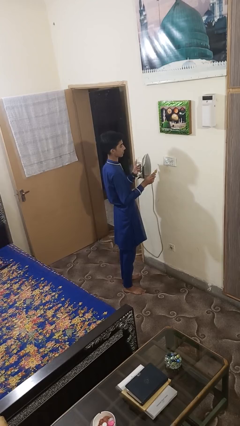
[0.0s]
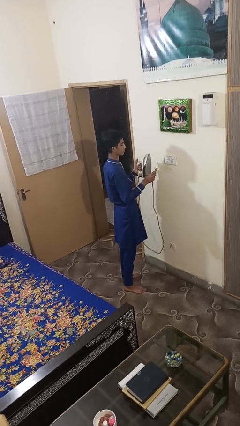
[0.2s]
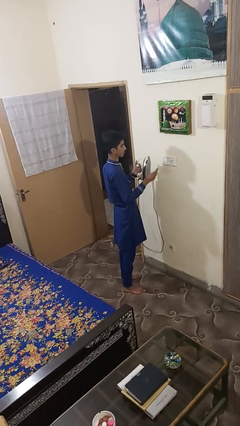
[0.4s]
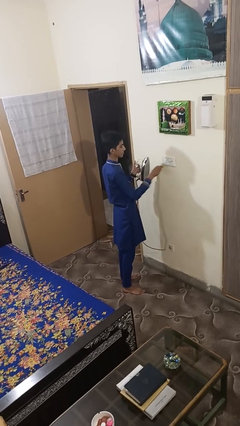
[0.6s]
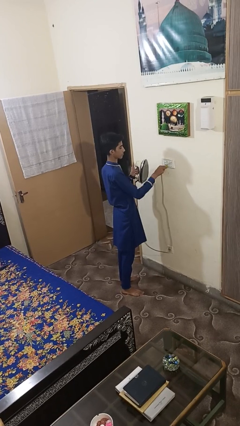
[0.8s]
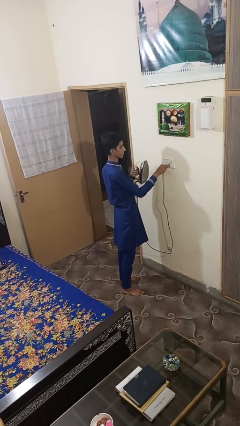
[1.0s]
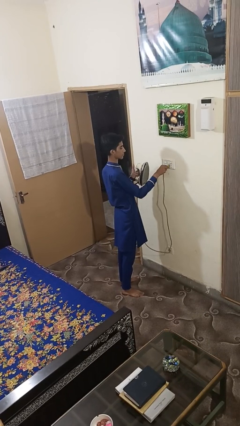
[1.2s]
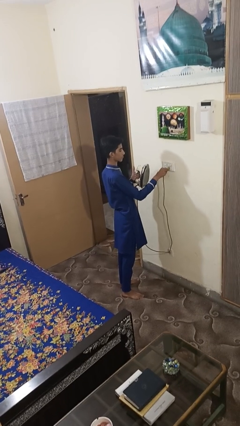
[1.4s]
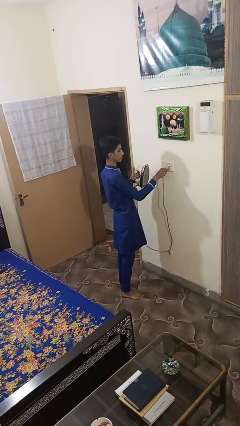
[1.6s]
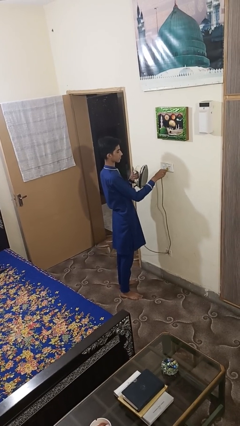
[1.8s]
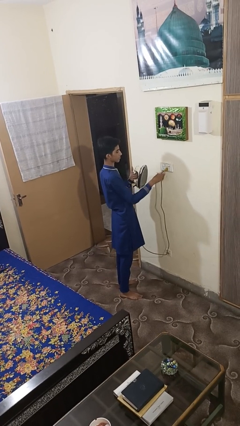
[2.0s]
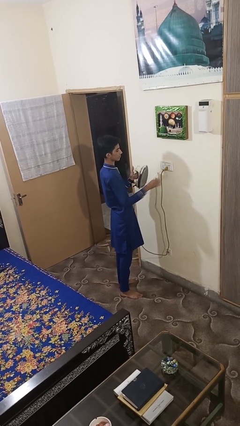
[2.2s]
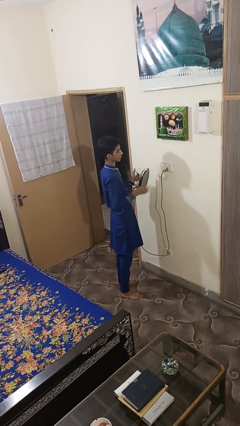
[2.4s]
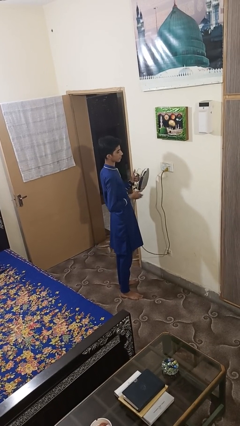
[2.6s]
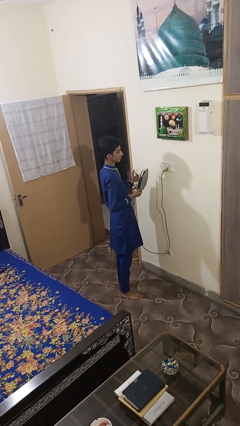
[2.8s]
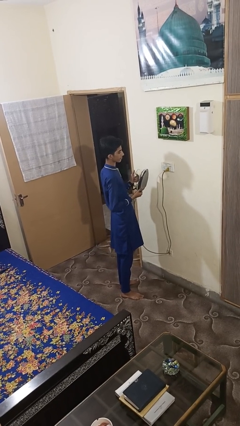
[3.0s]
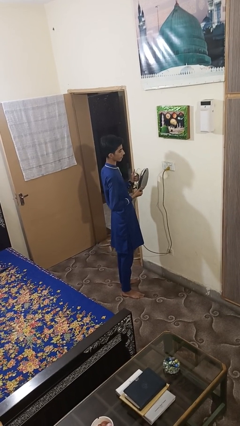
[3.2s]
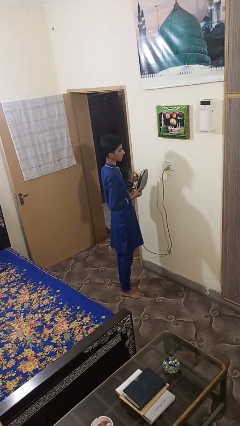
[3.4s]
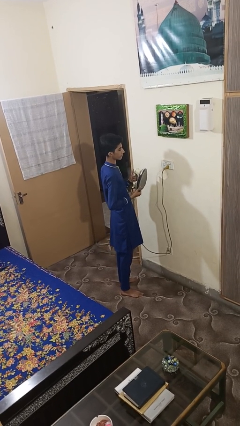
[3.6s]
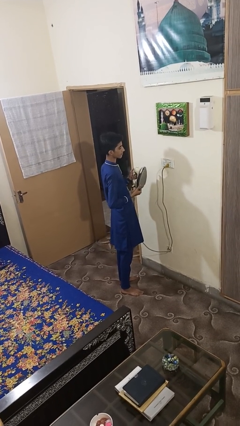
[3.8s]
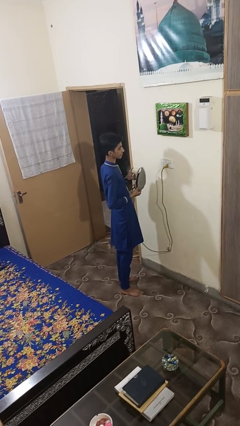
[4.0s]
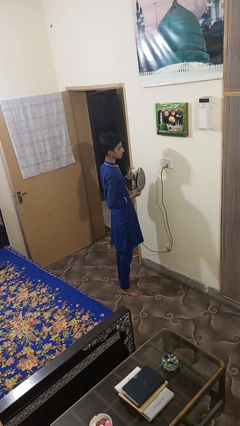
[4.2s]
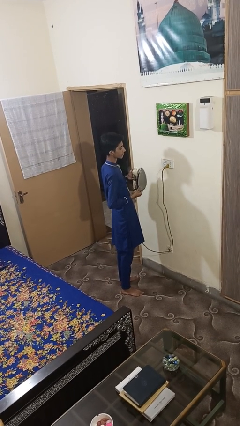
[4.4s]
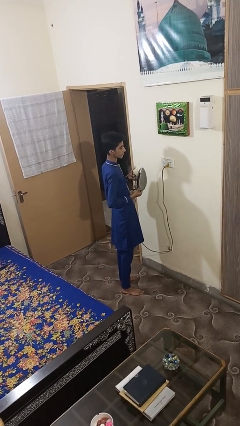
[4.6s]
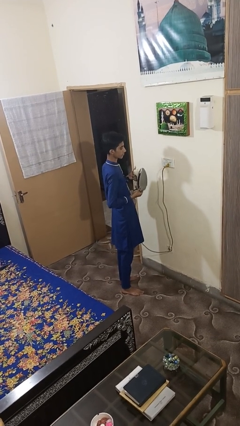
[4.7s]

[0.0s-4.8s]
person plugs into electrical socket

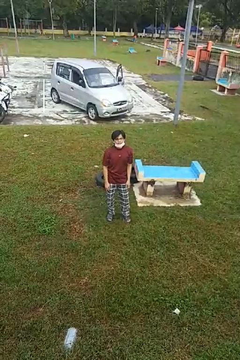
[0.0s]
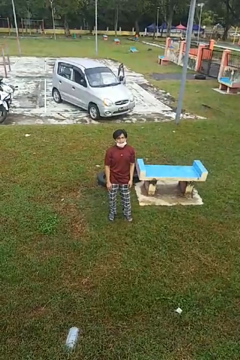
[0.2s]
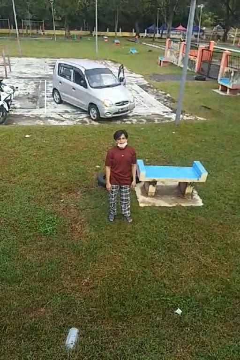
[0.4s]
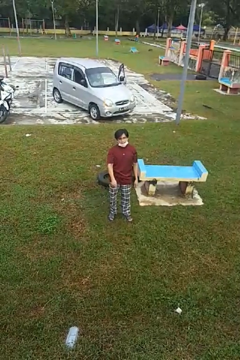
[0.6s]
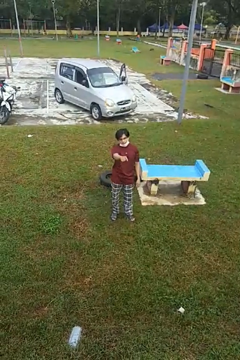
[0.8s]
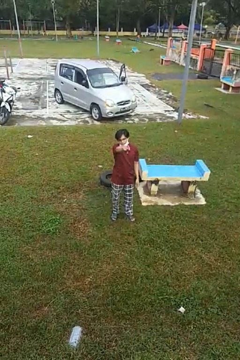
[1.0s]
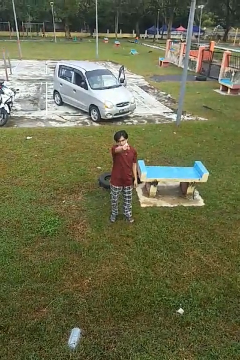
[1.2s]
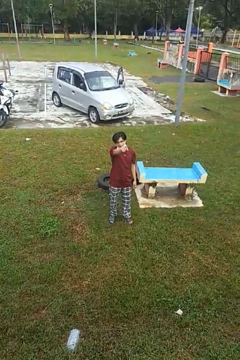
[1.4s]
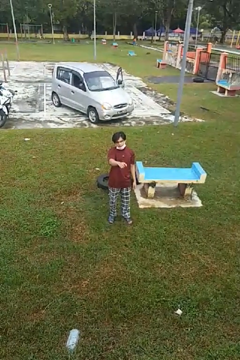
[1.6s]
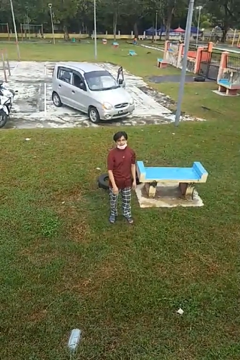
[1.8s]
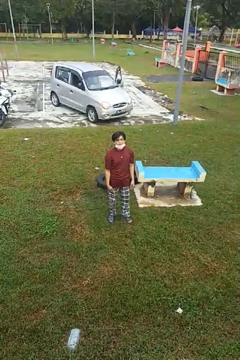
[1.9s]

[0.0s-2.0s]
person points at person

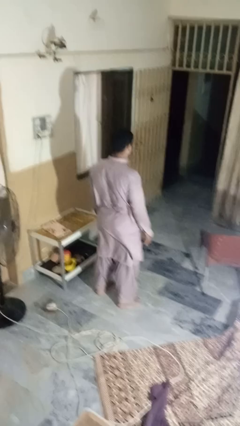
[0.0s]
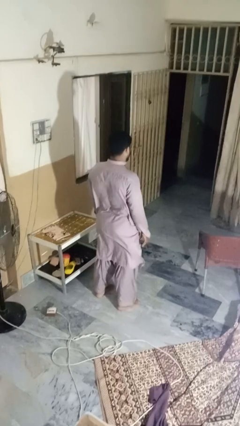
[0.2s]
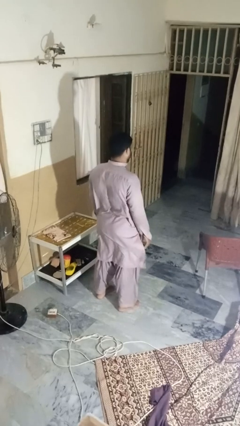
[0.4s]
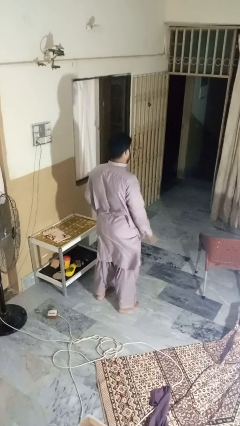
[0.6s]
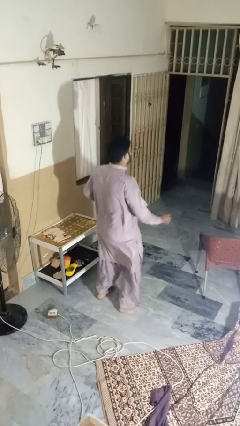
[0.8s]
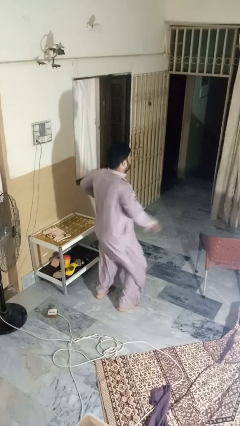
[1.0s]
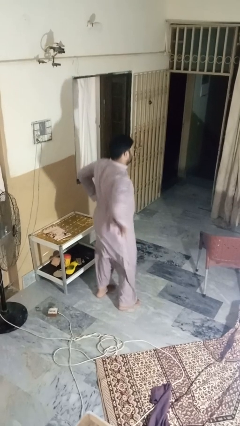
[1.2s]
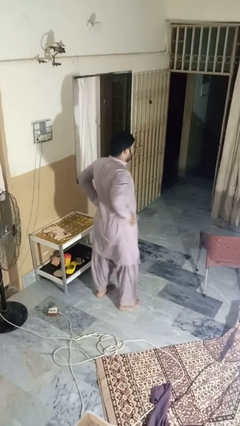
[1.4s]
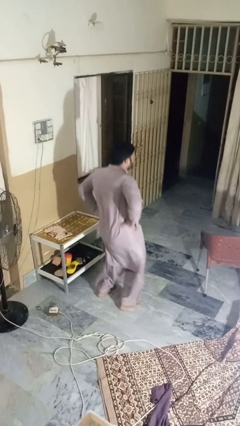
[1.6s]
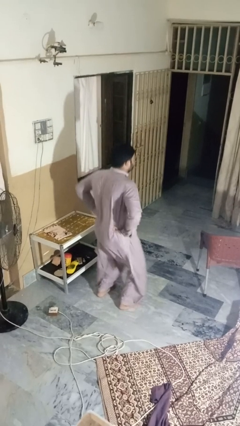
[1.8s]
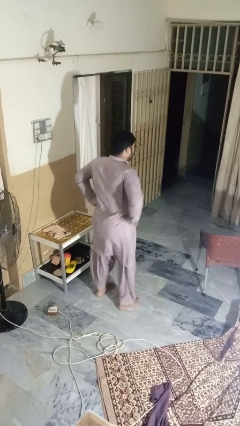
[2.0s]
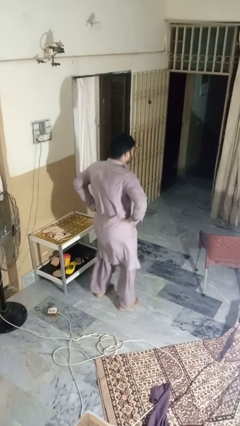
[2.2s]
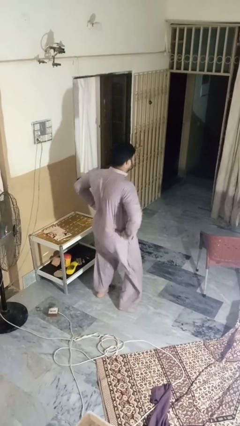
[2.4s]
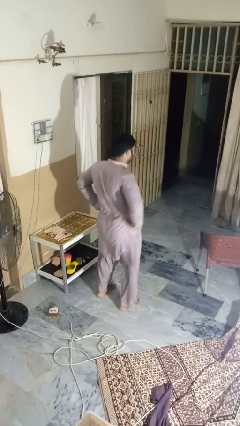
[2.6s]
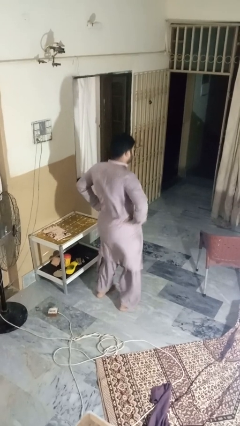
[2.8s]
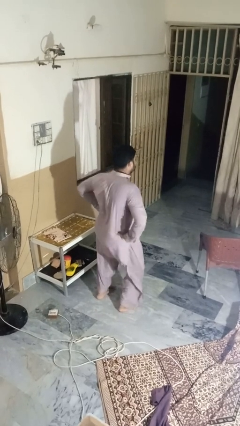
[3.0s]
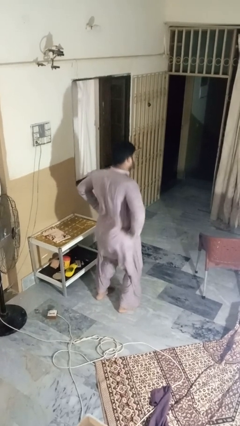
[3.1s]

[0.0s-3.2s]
person dances in place

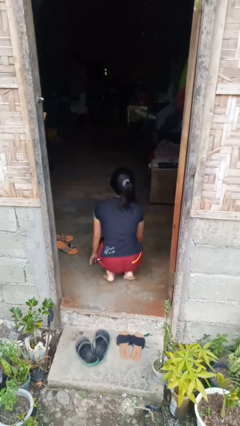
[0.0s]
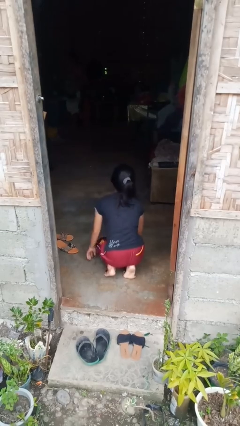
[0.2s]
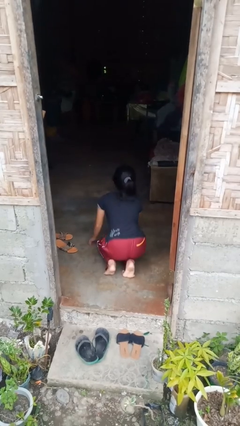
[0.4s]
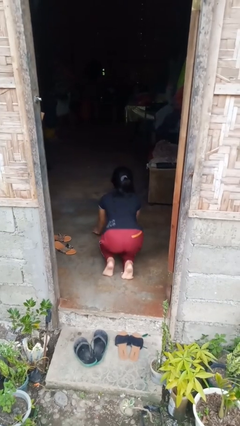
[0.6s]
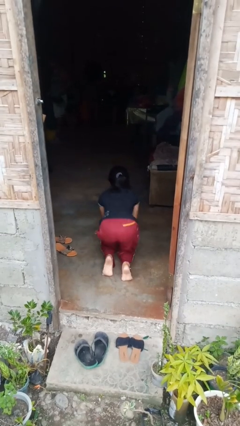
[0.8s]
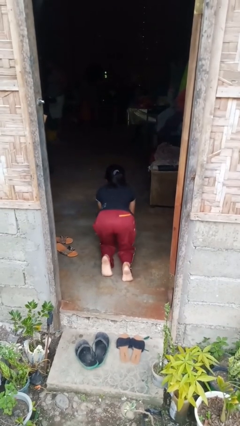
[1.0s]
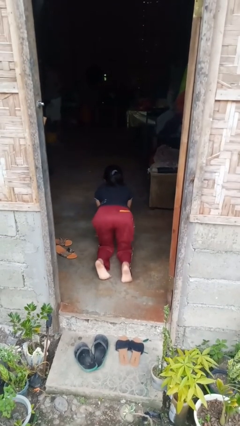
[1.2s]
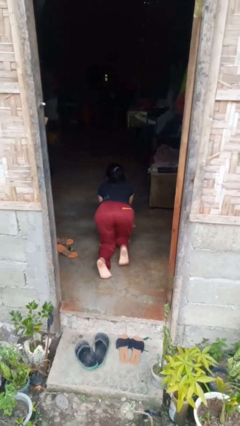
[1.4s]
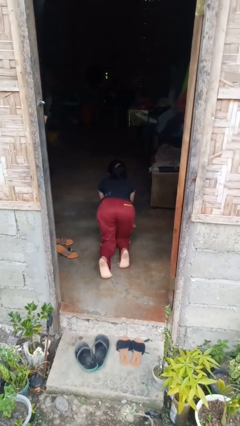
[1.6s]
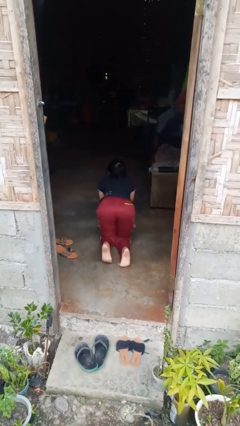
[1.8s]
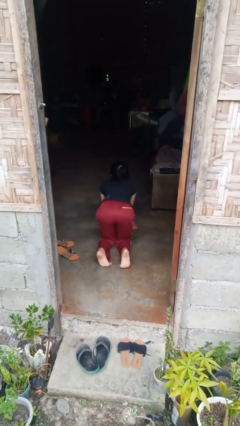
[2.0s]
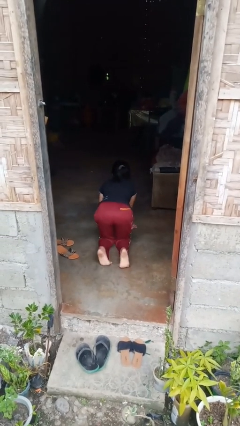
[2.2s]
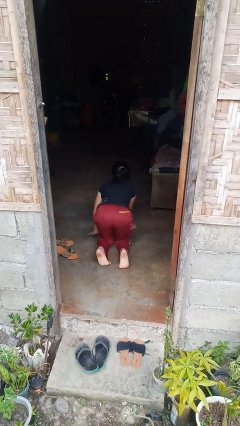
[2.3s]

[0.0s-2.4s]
person crawls

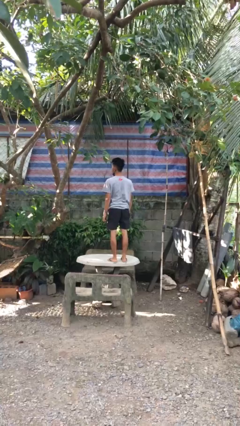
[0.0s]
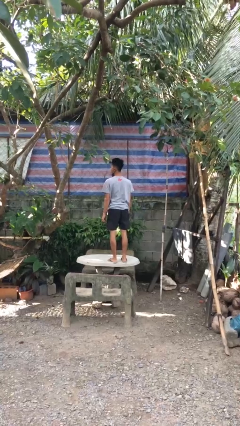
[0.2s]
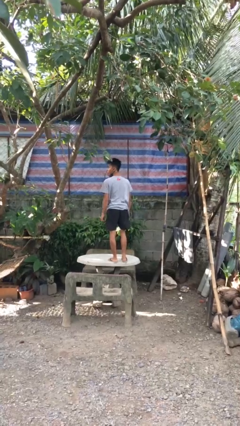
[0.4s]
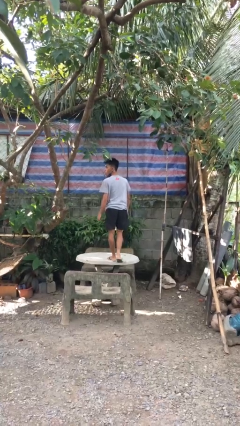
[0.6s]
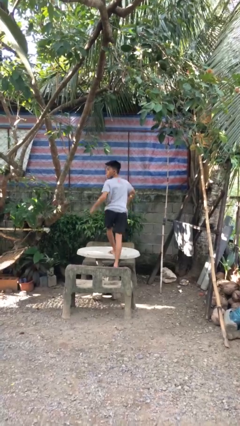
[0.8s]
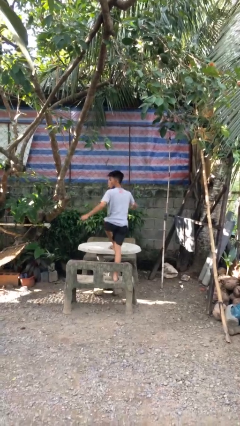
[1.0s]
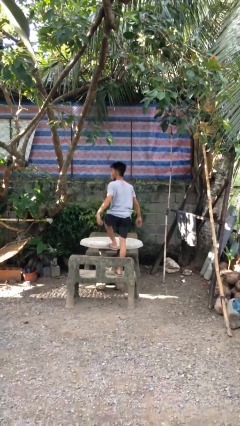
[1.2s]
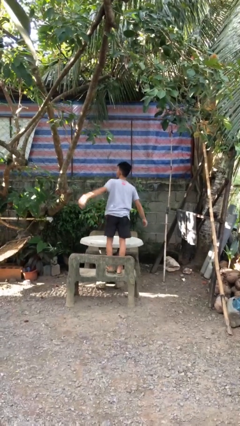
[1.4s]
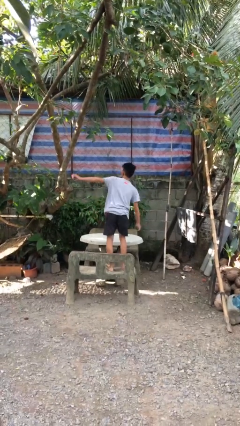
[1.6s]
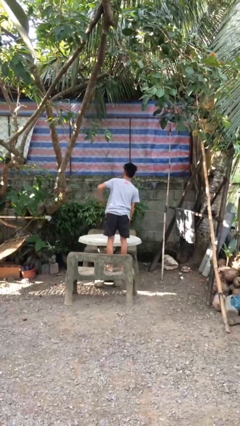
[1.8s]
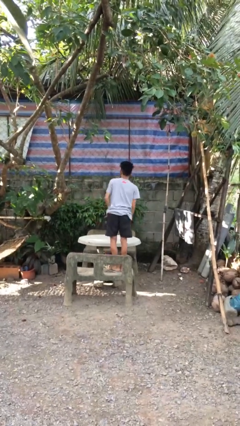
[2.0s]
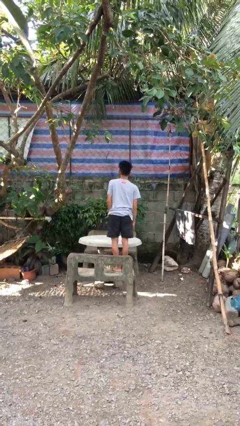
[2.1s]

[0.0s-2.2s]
person climbs off table

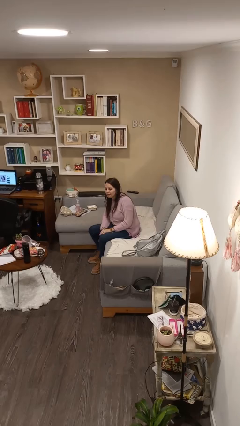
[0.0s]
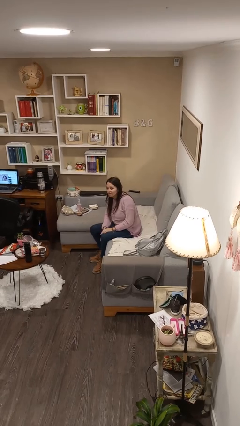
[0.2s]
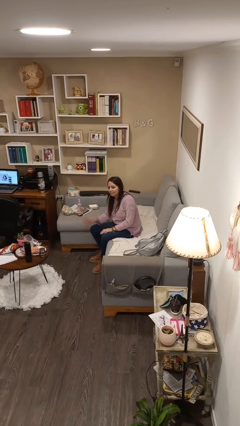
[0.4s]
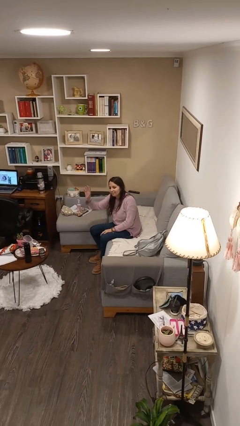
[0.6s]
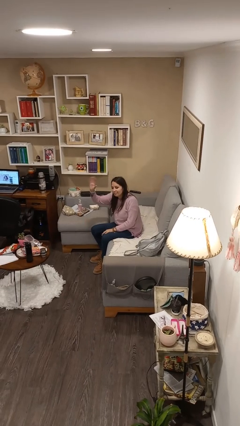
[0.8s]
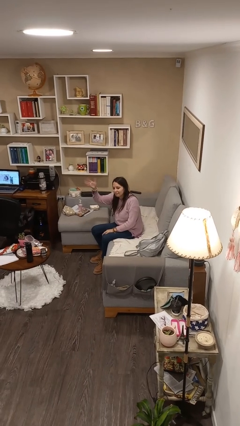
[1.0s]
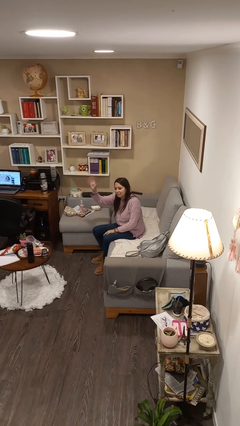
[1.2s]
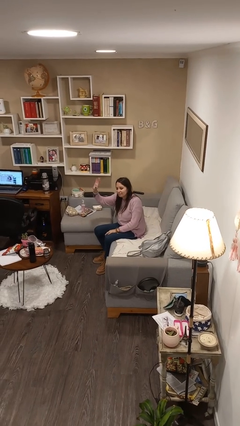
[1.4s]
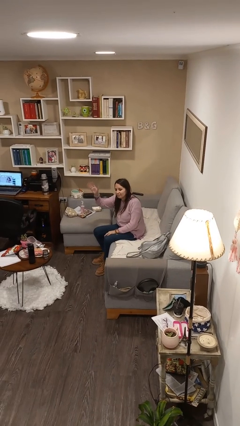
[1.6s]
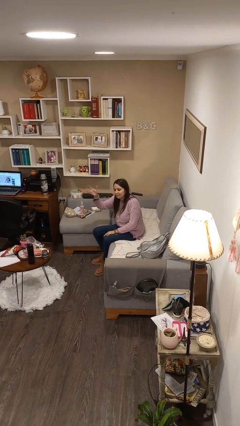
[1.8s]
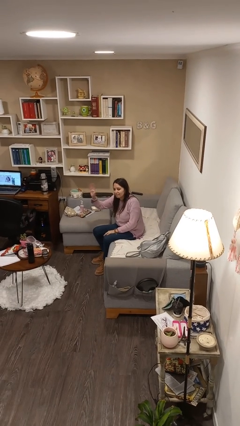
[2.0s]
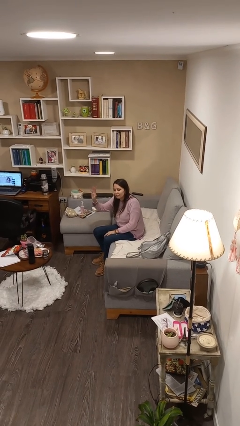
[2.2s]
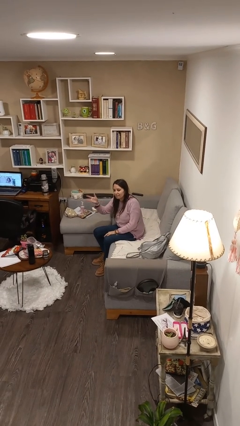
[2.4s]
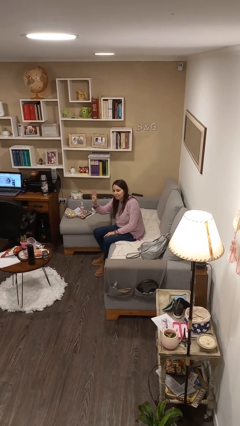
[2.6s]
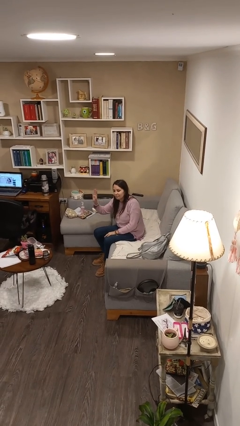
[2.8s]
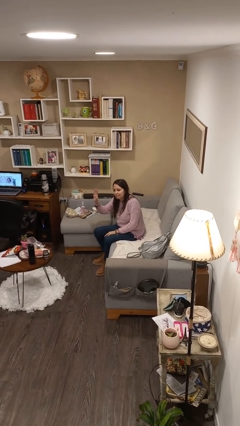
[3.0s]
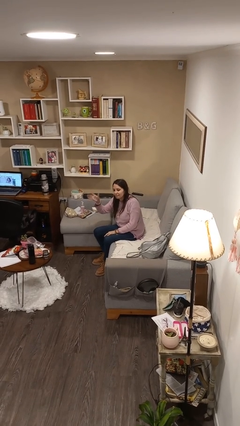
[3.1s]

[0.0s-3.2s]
person waves at person
